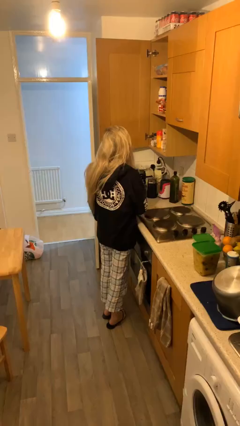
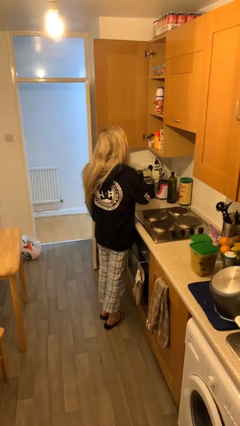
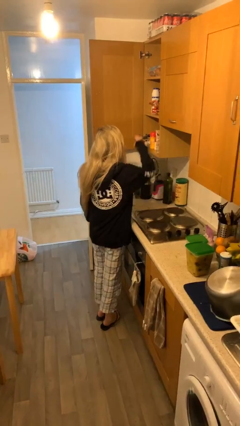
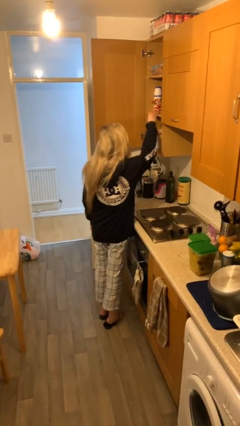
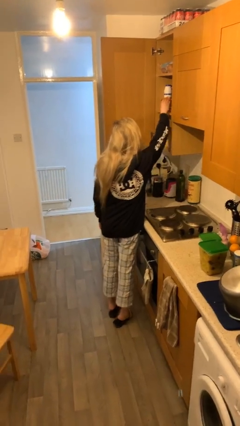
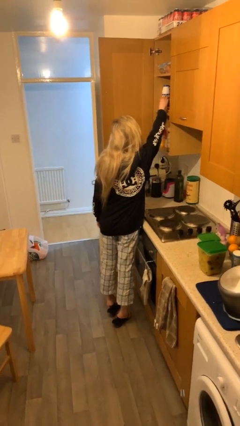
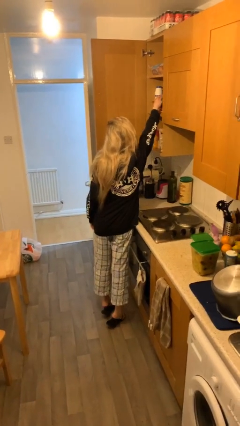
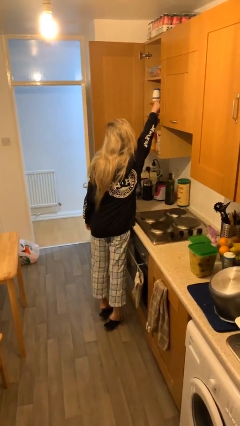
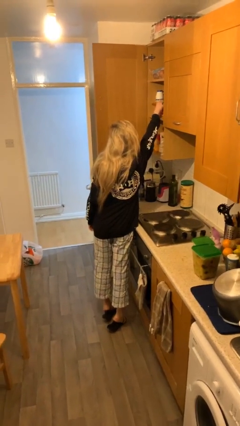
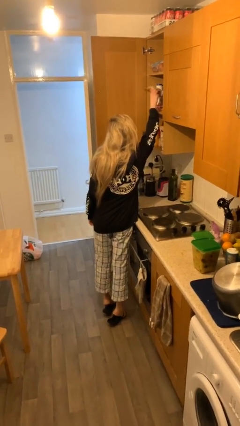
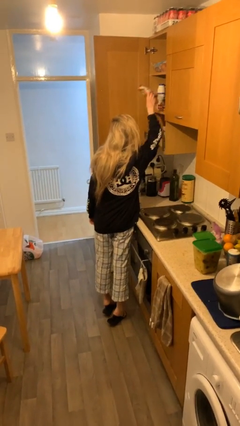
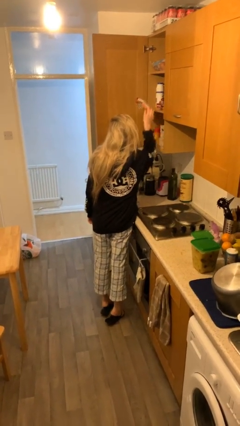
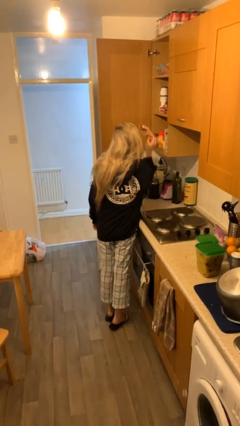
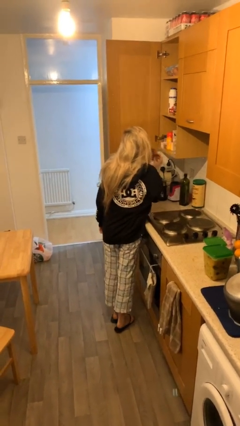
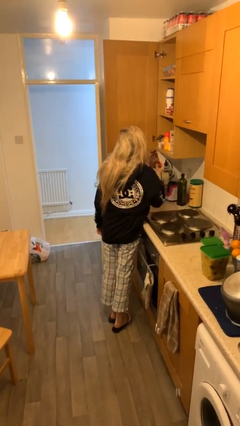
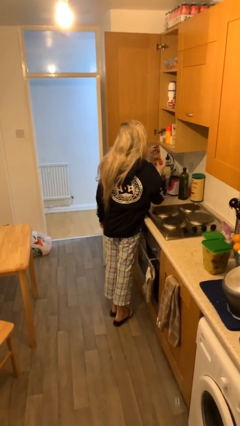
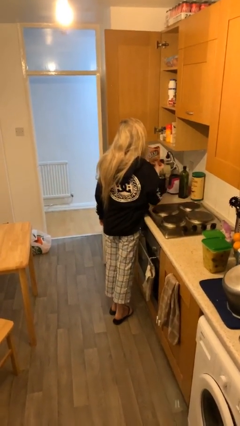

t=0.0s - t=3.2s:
person picks up object from shelf

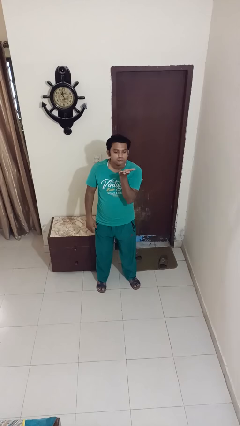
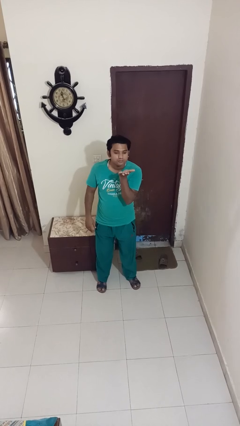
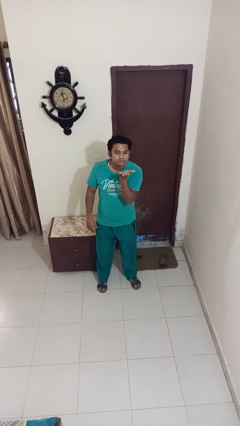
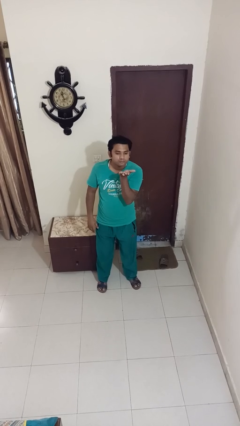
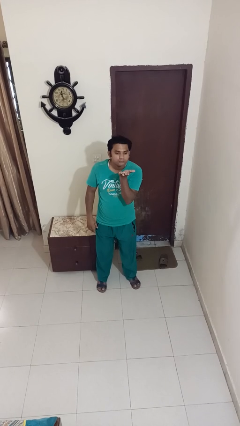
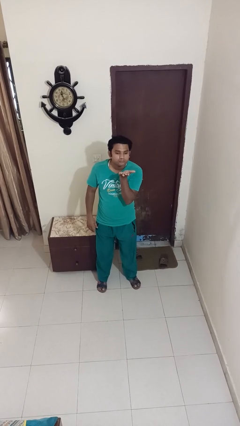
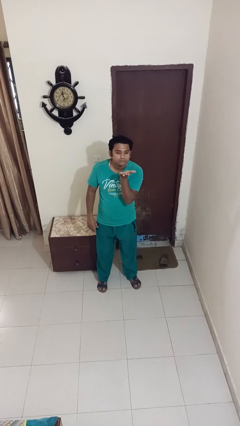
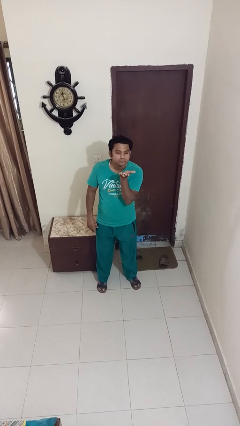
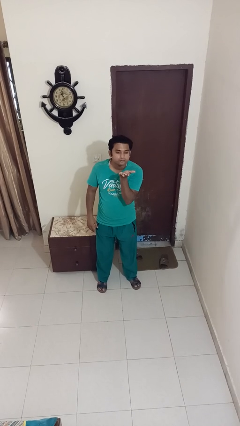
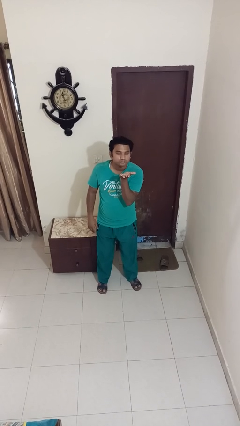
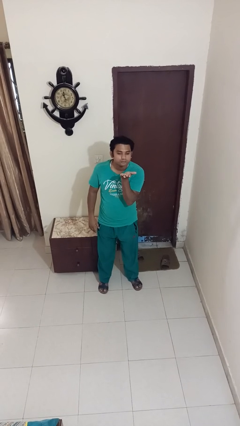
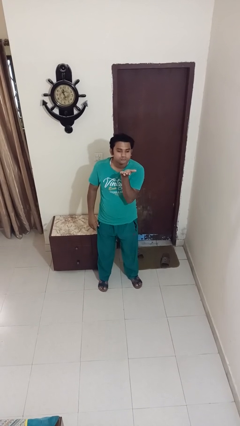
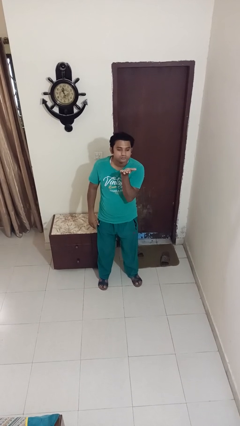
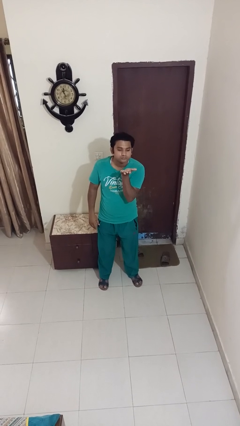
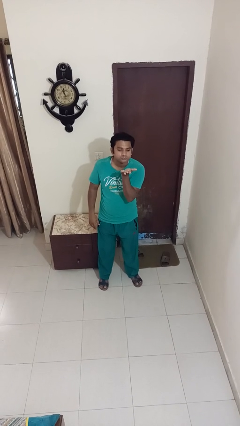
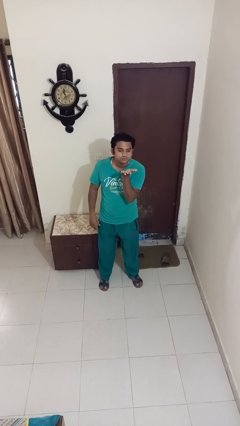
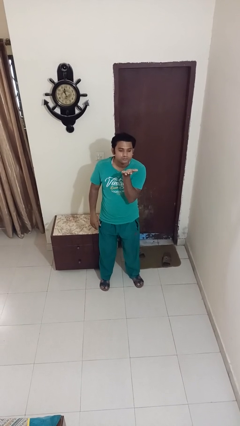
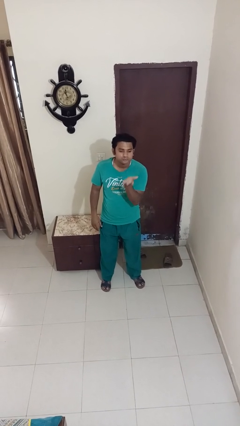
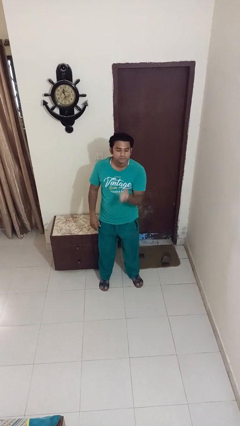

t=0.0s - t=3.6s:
person gestures blow kiss

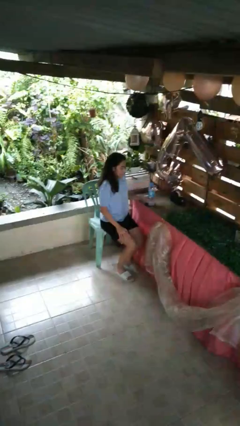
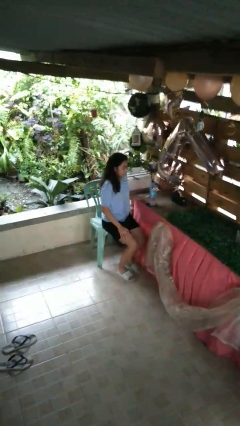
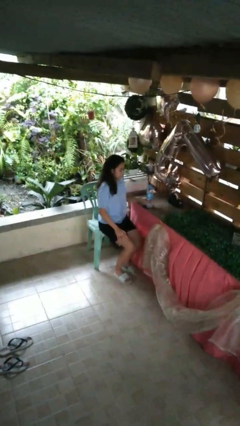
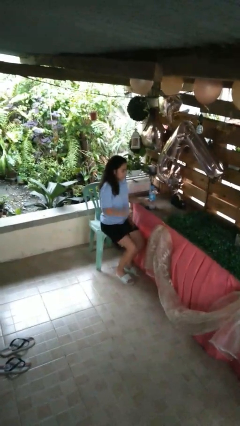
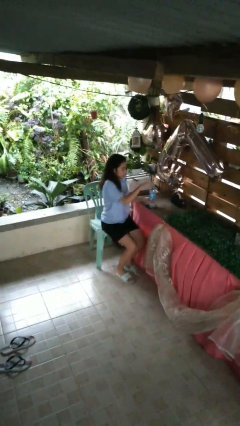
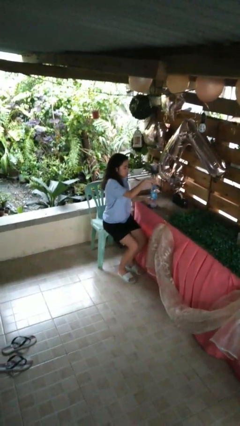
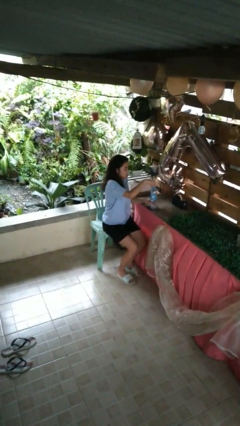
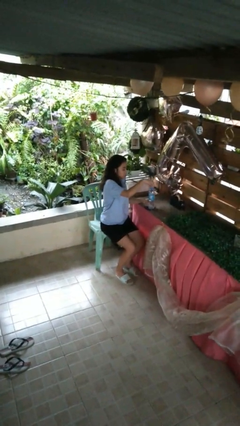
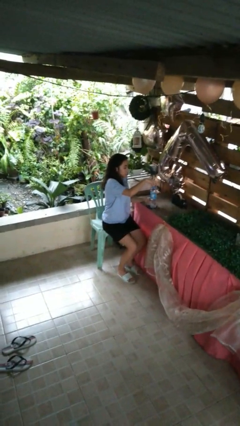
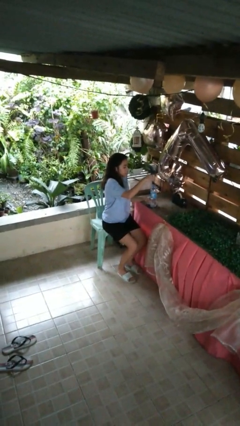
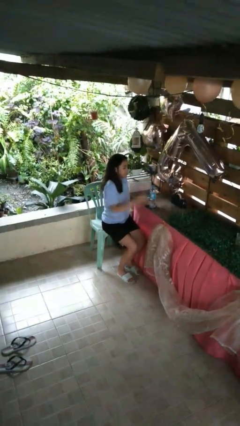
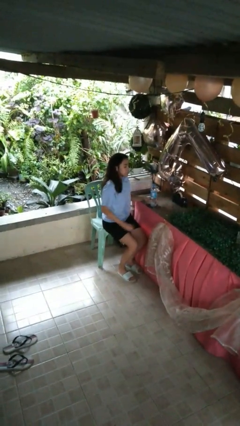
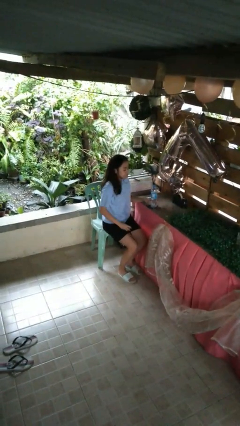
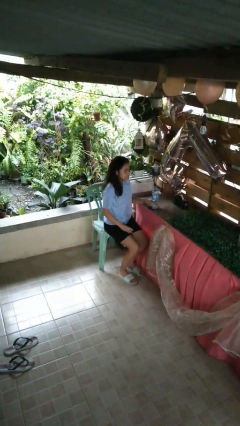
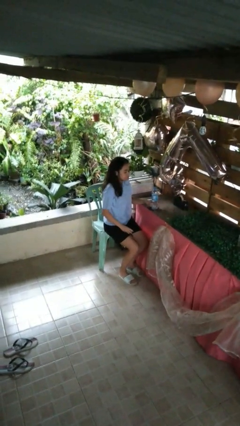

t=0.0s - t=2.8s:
person unscrews lid from bottle

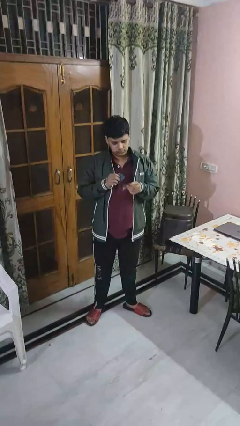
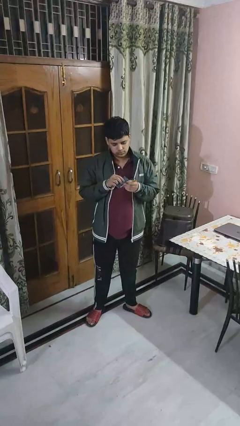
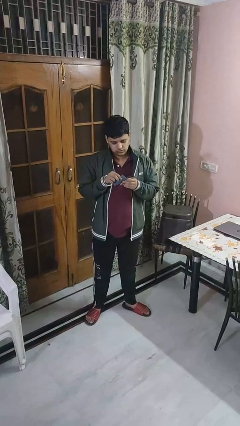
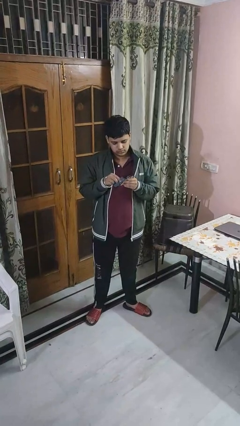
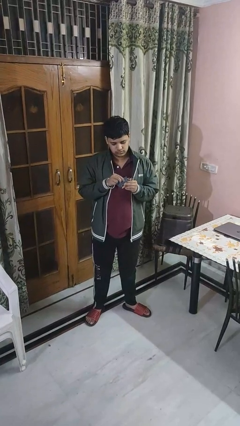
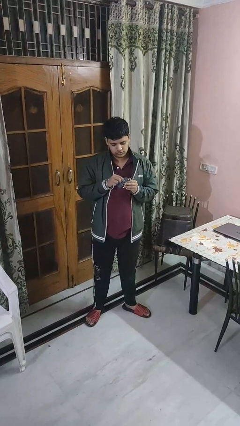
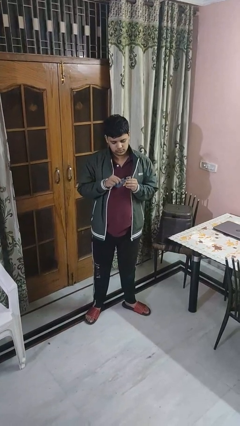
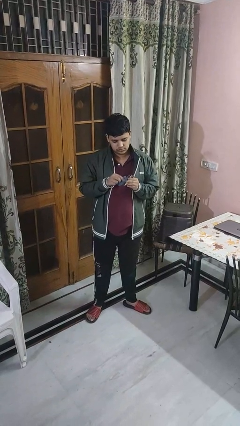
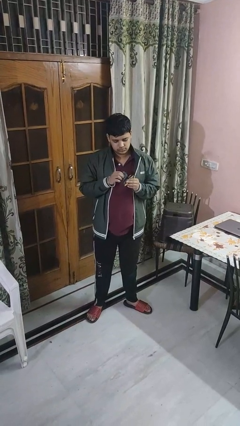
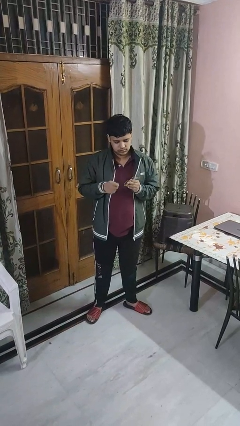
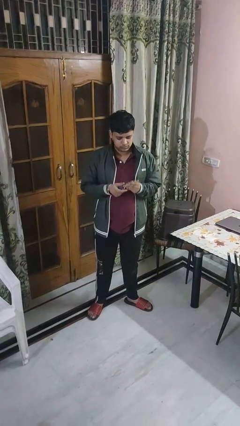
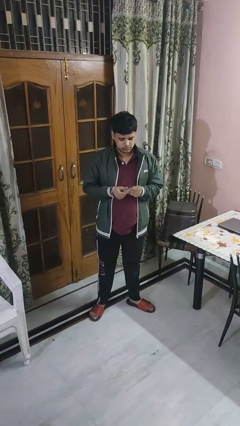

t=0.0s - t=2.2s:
person cleans eyeglasses

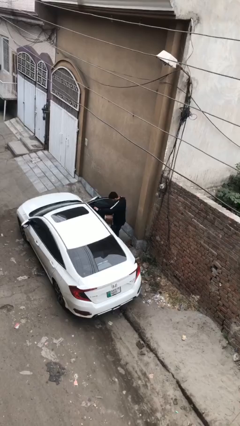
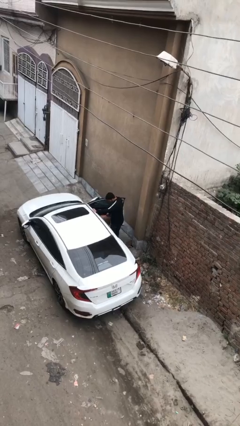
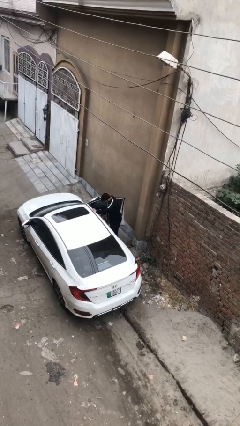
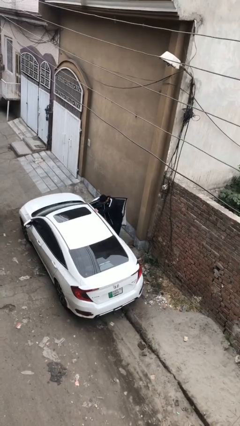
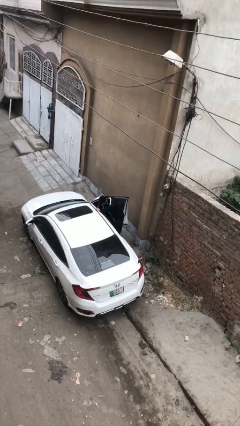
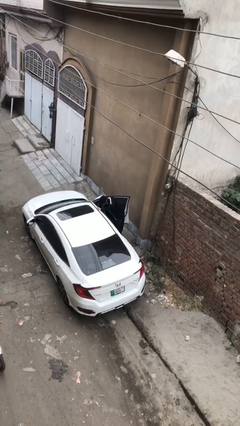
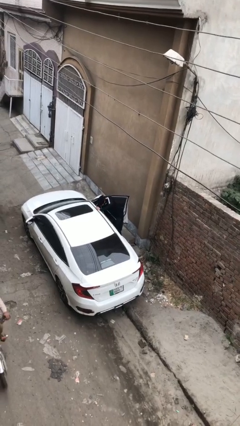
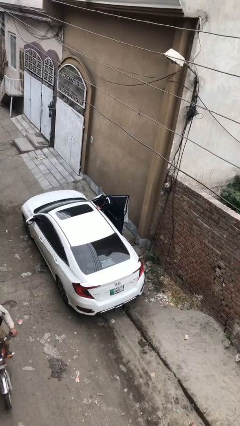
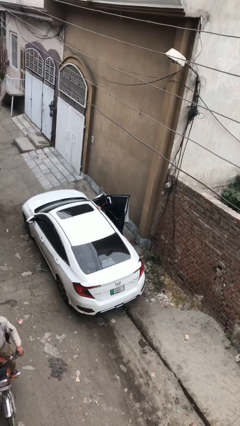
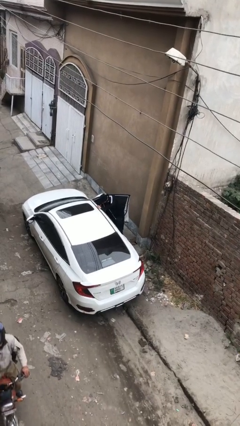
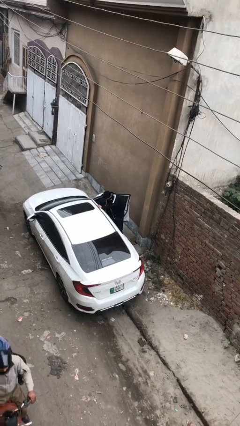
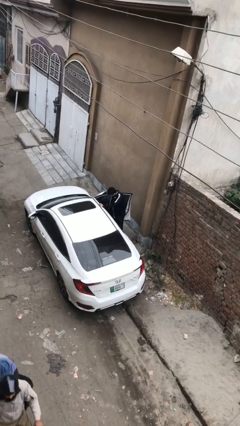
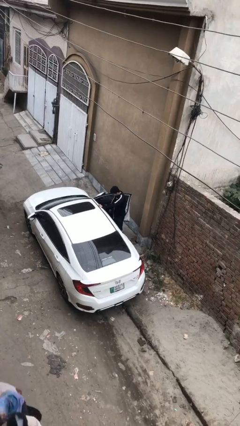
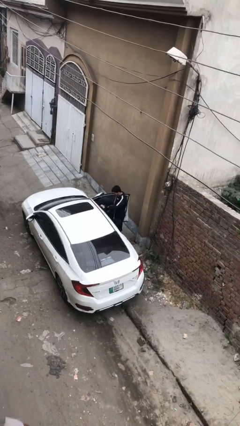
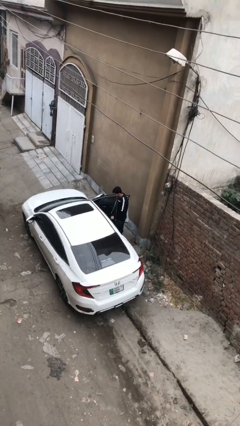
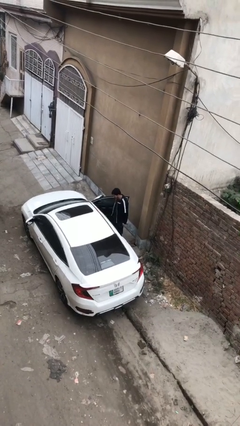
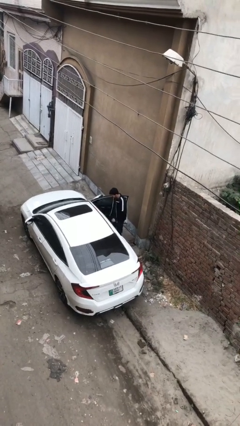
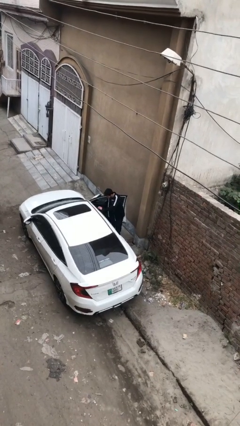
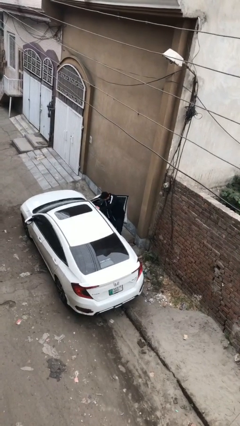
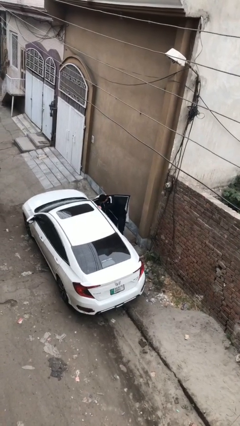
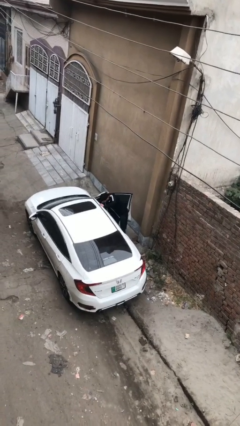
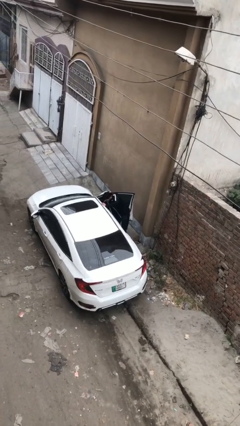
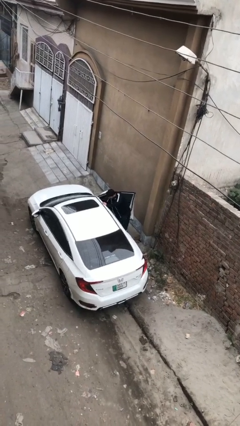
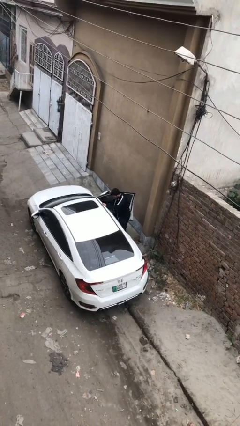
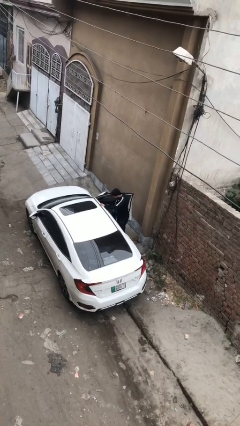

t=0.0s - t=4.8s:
person loads car

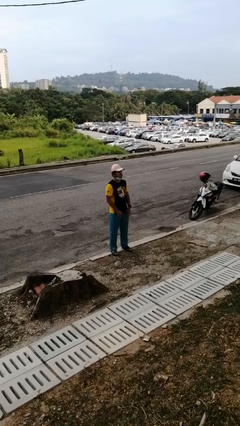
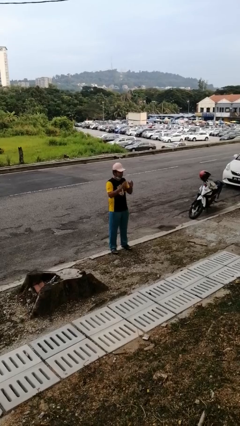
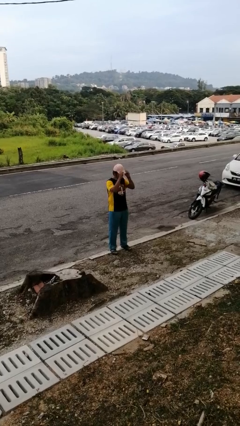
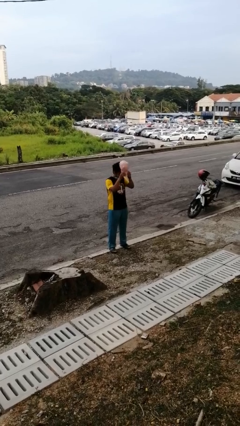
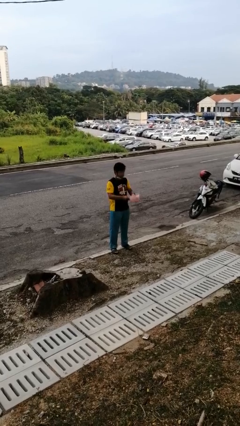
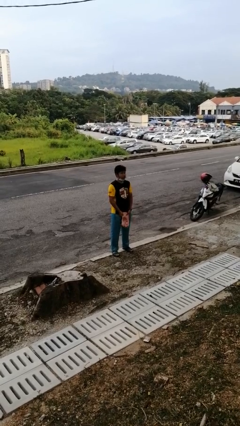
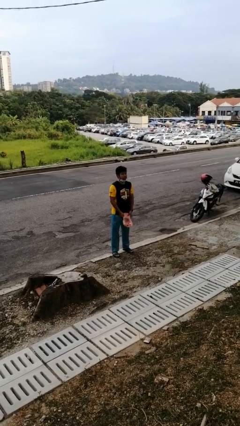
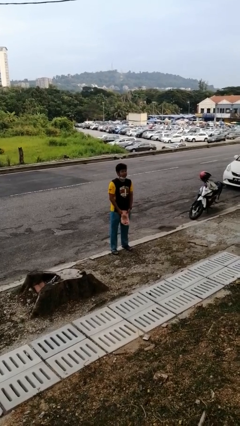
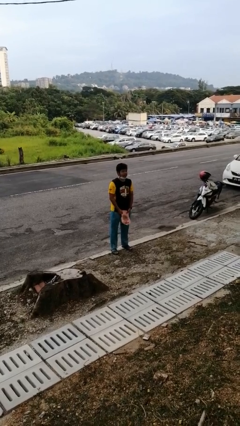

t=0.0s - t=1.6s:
person takes off hat
